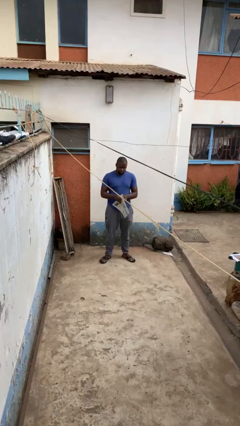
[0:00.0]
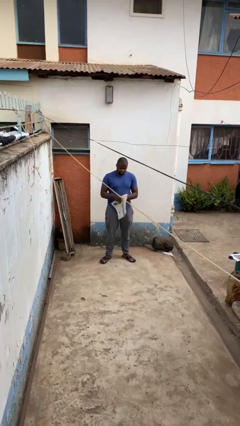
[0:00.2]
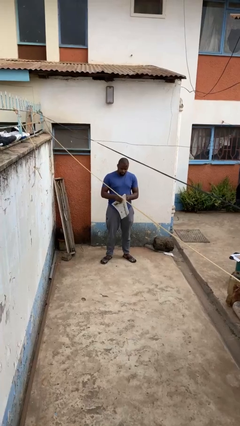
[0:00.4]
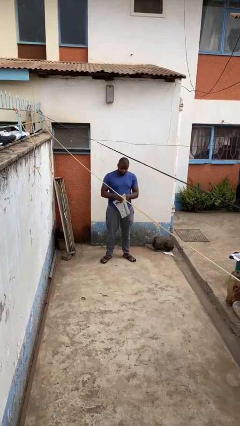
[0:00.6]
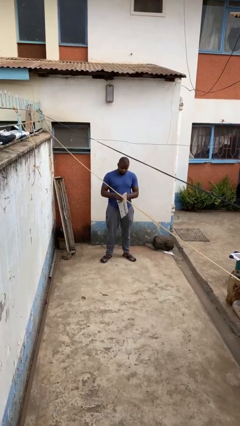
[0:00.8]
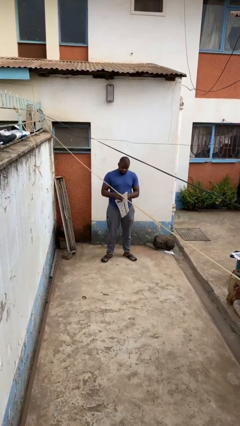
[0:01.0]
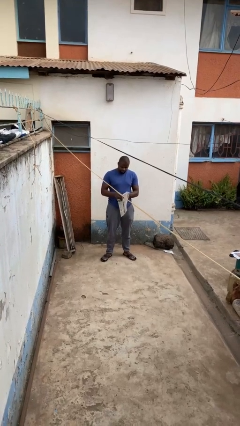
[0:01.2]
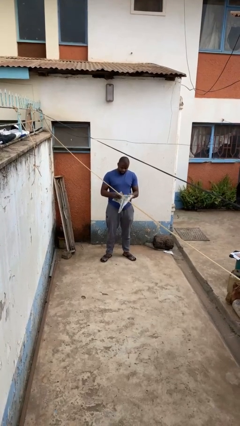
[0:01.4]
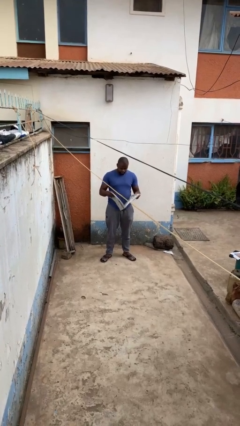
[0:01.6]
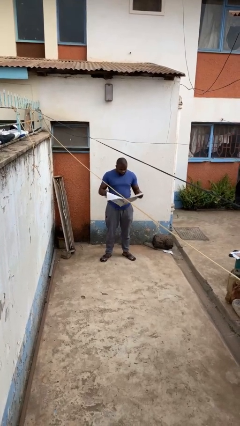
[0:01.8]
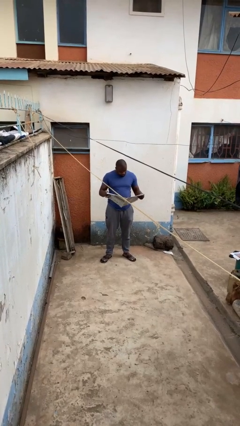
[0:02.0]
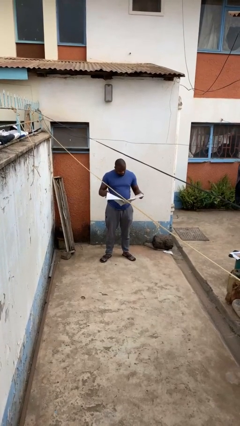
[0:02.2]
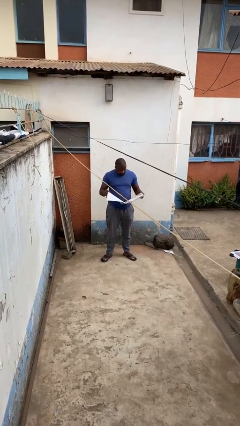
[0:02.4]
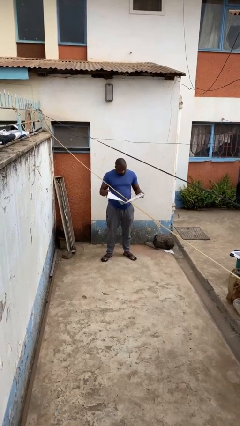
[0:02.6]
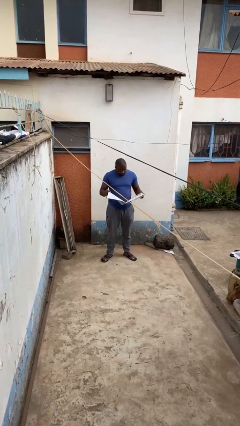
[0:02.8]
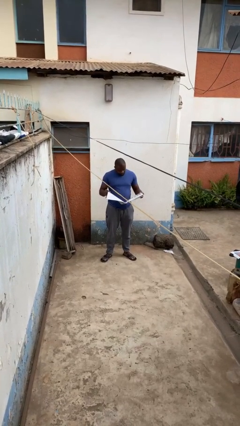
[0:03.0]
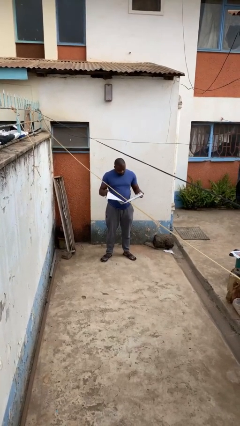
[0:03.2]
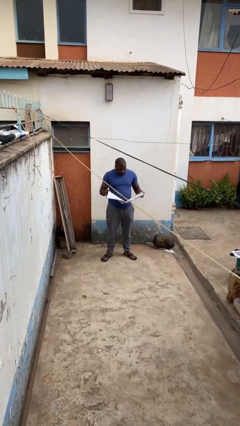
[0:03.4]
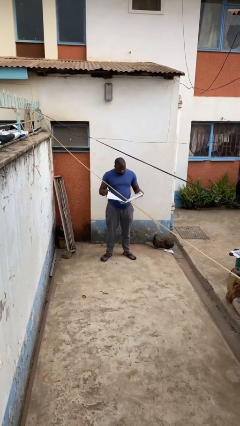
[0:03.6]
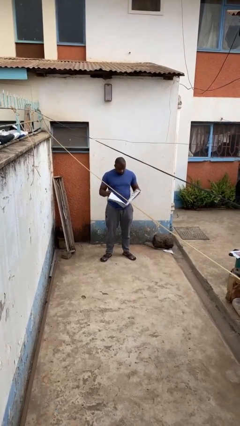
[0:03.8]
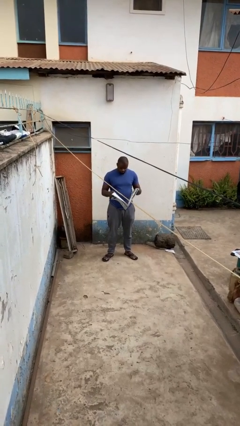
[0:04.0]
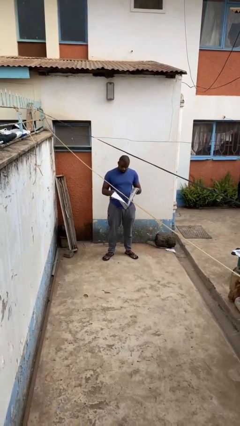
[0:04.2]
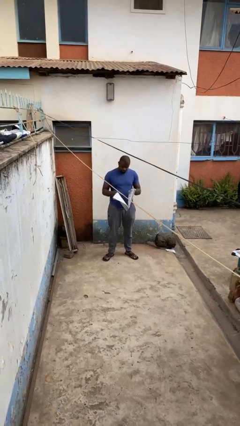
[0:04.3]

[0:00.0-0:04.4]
person reads newspaper

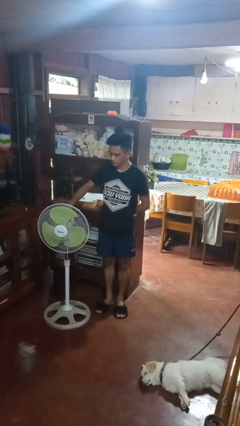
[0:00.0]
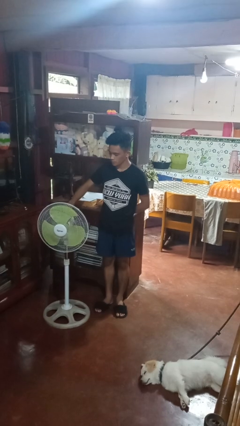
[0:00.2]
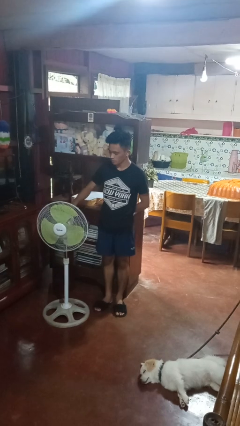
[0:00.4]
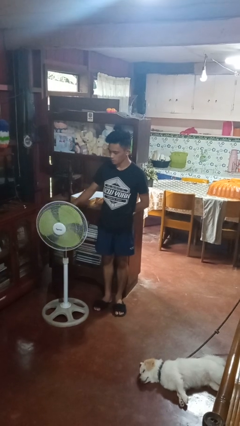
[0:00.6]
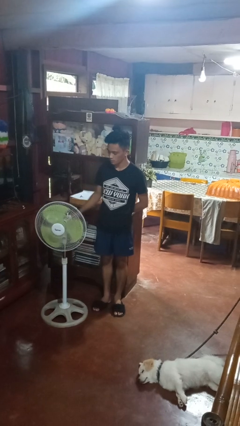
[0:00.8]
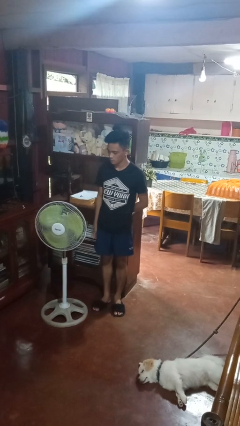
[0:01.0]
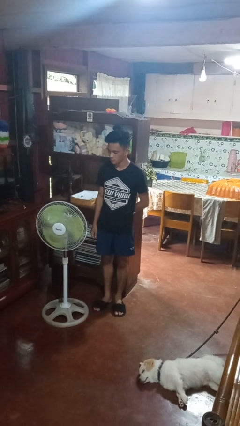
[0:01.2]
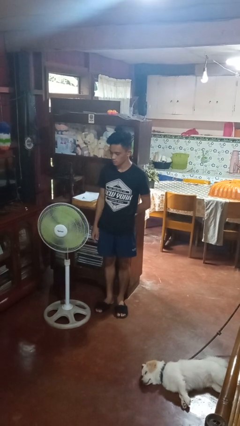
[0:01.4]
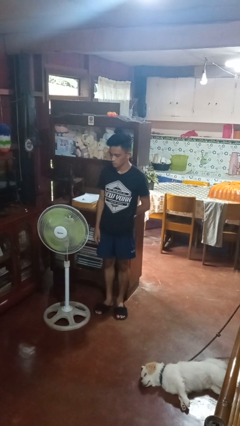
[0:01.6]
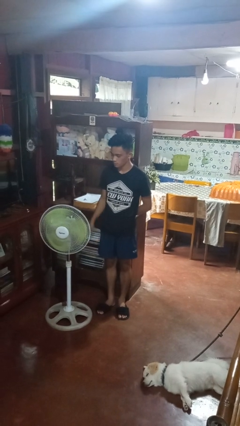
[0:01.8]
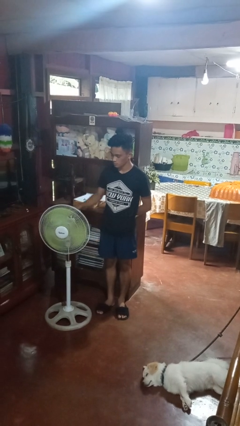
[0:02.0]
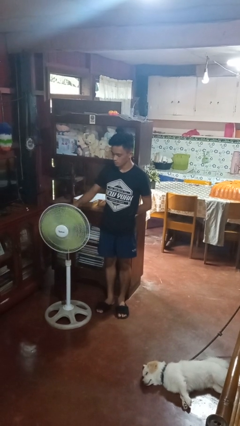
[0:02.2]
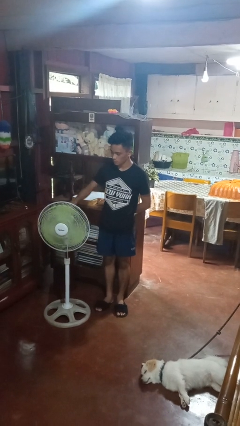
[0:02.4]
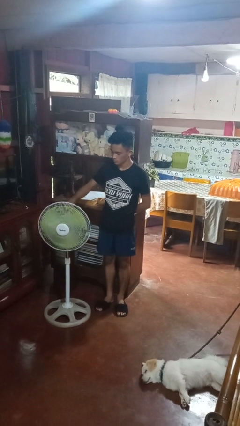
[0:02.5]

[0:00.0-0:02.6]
person turns on fan

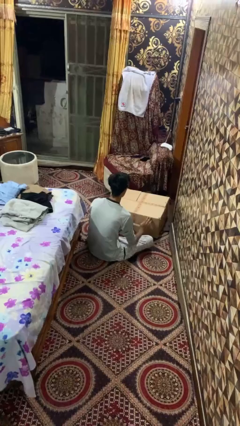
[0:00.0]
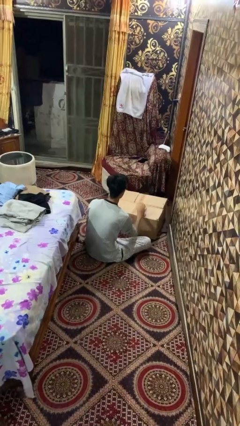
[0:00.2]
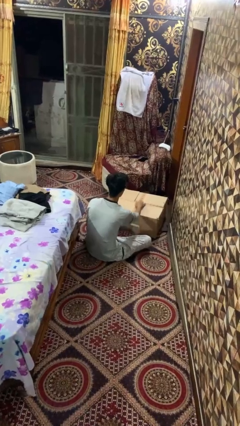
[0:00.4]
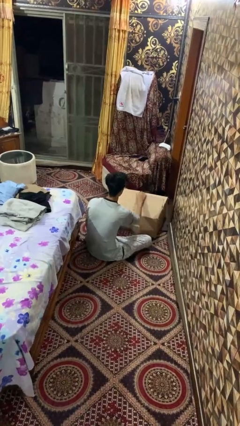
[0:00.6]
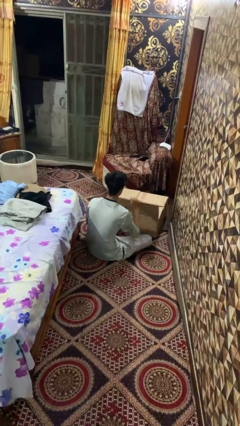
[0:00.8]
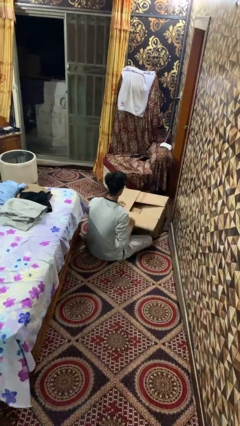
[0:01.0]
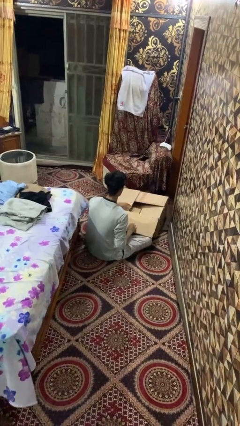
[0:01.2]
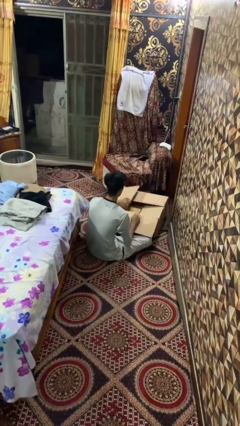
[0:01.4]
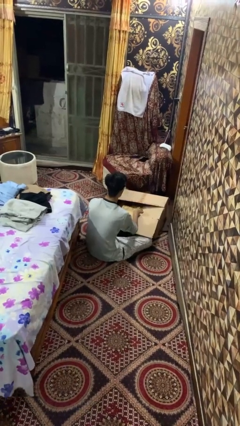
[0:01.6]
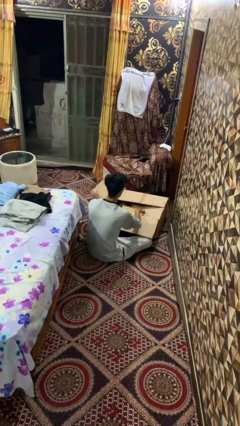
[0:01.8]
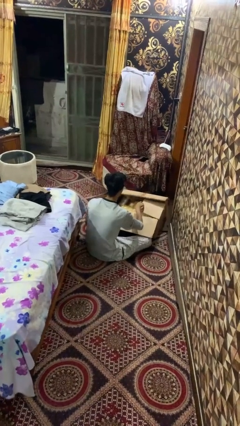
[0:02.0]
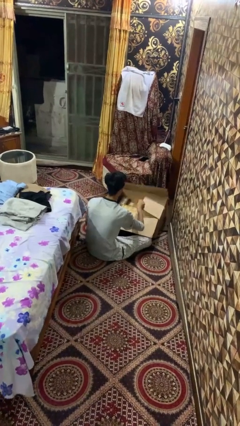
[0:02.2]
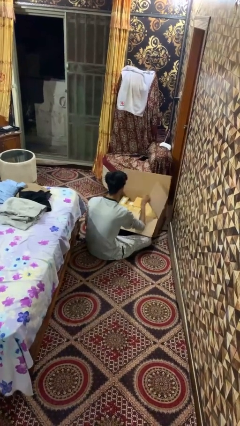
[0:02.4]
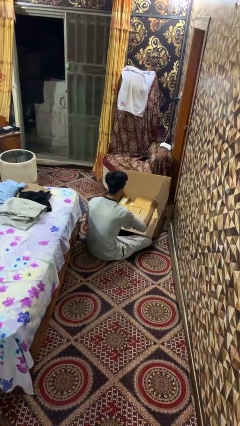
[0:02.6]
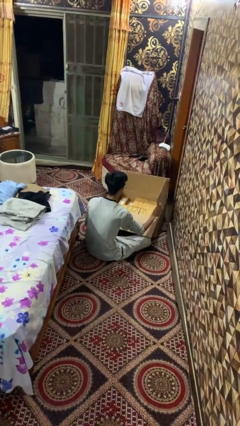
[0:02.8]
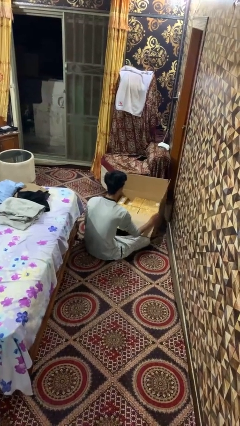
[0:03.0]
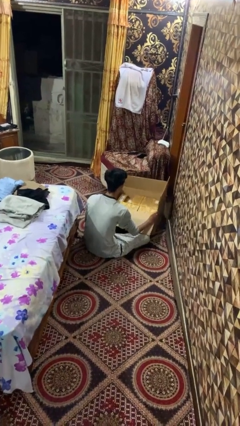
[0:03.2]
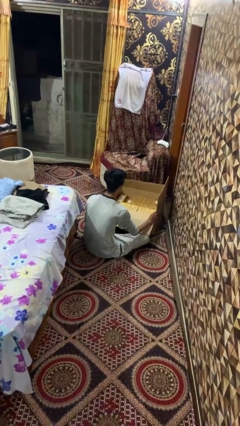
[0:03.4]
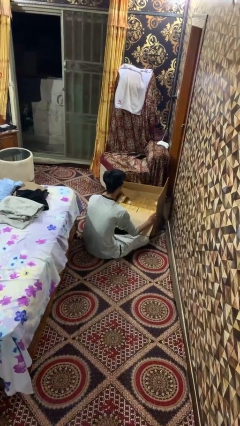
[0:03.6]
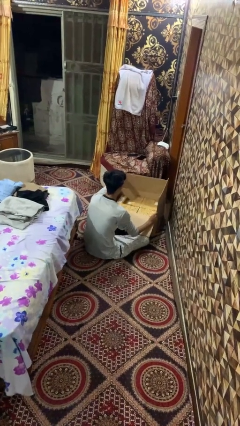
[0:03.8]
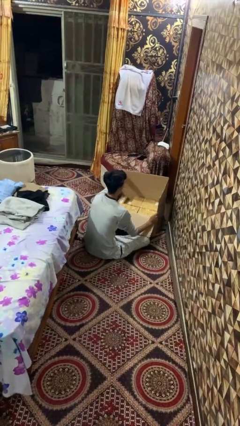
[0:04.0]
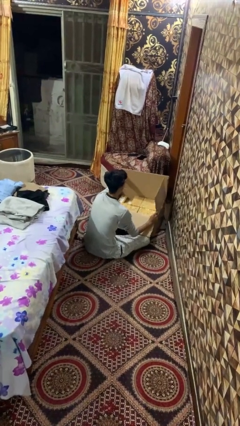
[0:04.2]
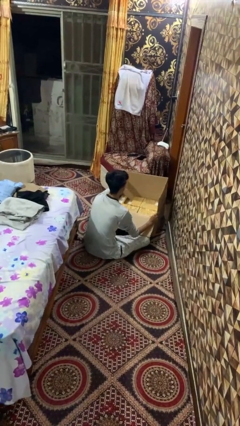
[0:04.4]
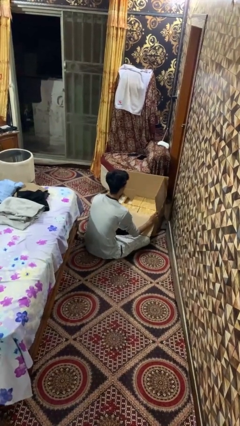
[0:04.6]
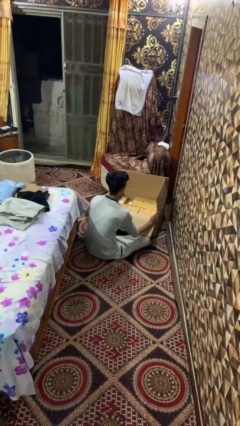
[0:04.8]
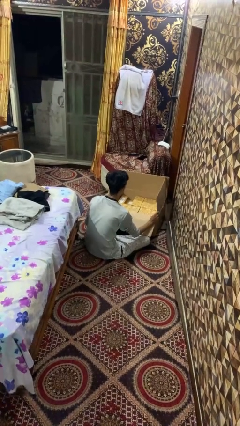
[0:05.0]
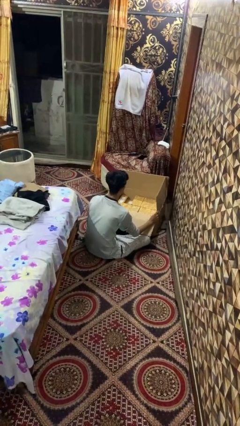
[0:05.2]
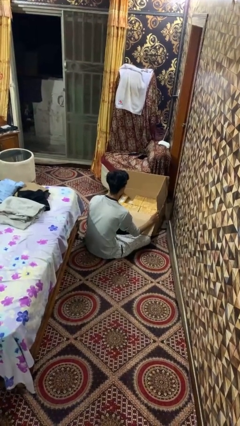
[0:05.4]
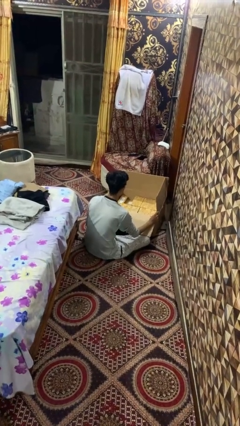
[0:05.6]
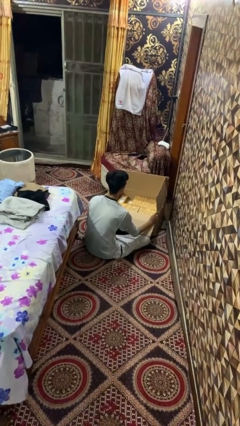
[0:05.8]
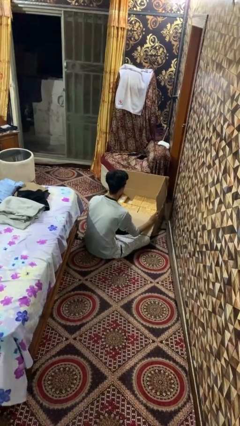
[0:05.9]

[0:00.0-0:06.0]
person opens box

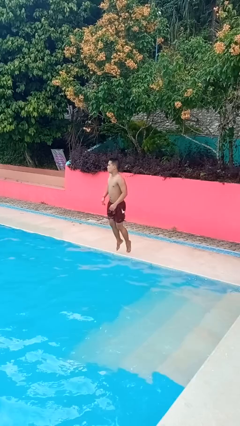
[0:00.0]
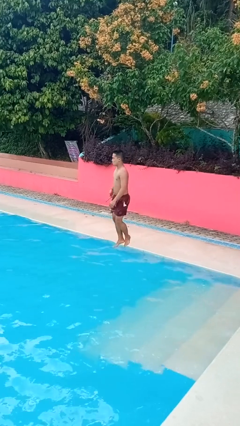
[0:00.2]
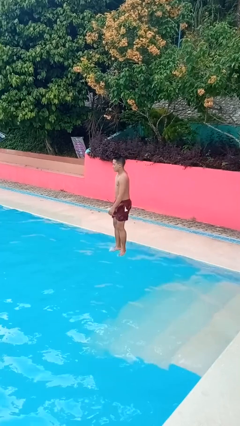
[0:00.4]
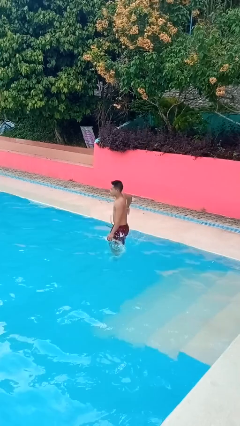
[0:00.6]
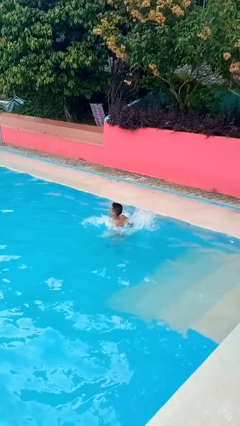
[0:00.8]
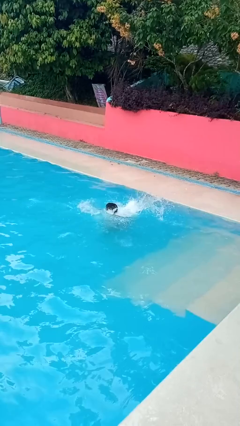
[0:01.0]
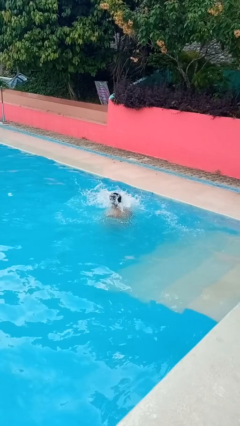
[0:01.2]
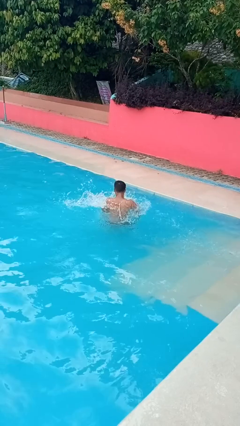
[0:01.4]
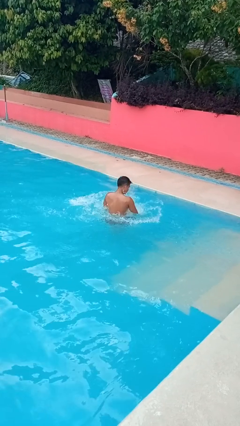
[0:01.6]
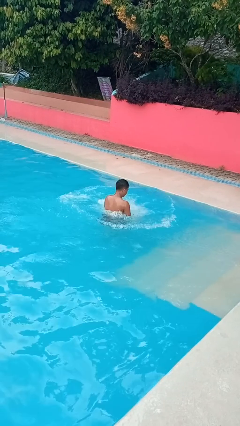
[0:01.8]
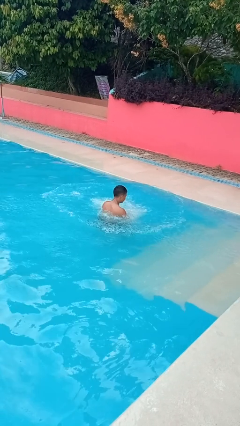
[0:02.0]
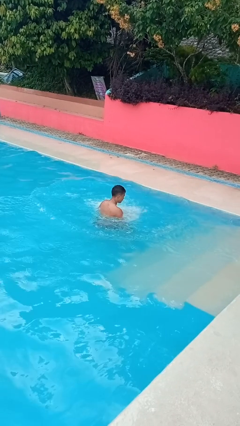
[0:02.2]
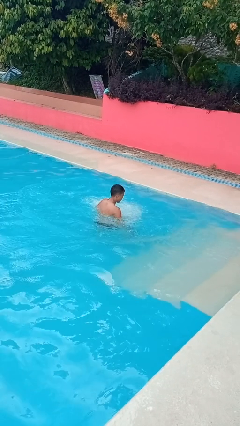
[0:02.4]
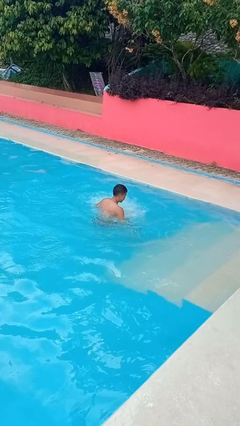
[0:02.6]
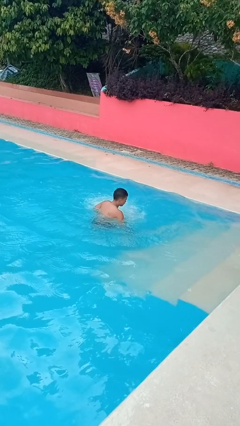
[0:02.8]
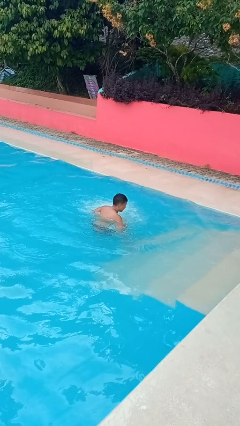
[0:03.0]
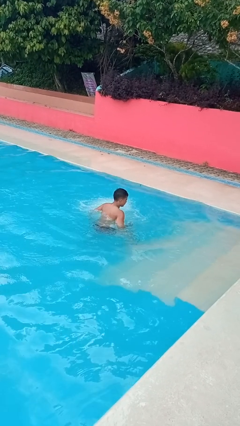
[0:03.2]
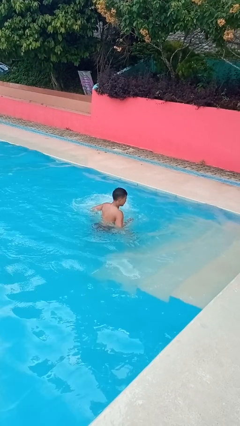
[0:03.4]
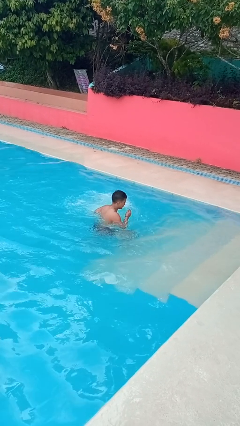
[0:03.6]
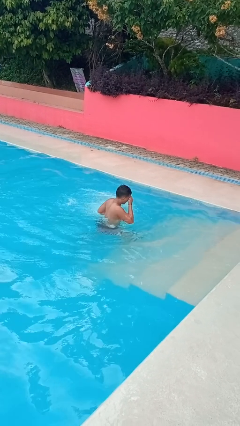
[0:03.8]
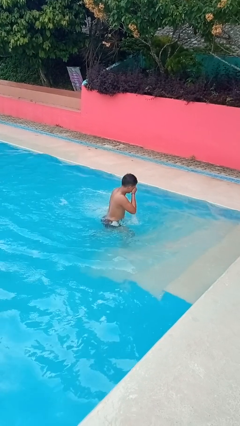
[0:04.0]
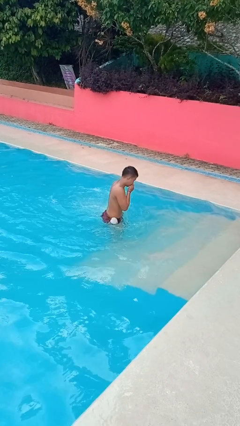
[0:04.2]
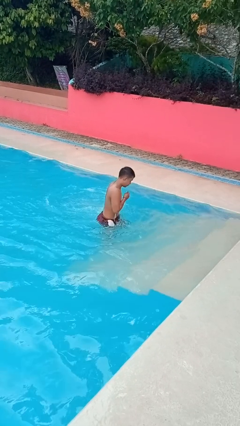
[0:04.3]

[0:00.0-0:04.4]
person jumps into pool

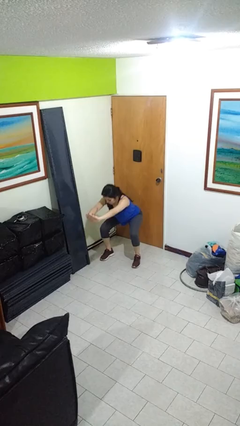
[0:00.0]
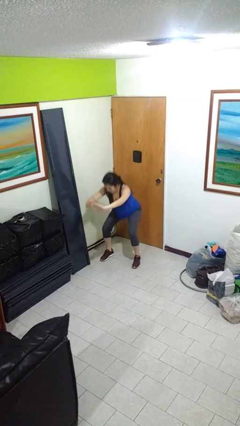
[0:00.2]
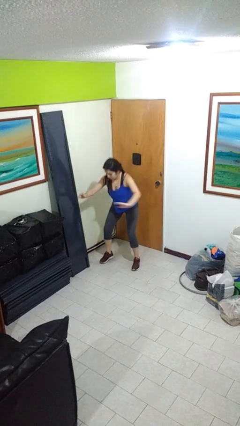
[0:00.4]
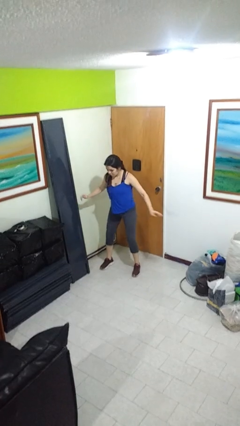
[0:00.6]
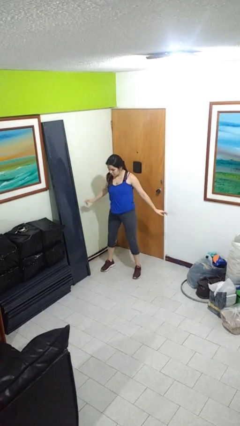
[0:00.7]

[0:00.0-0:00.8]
person stands up
